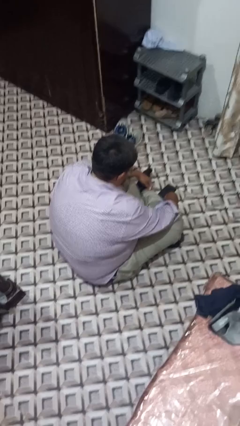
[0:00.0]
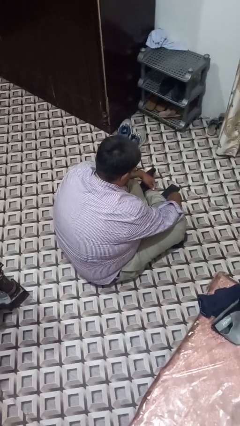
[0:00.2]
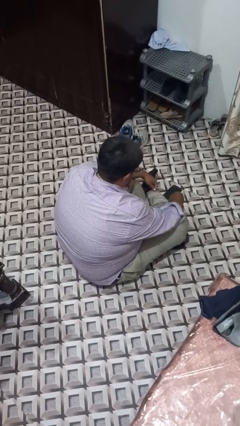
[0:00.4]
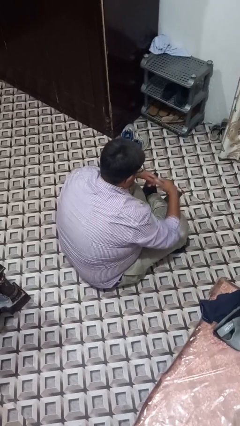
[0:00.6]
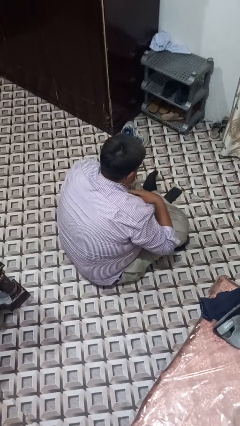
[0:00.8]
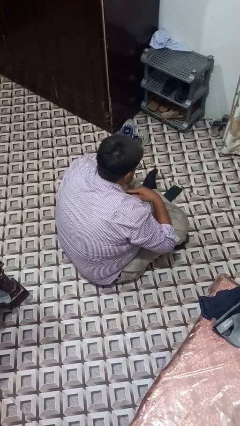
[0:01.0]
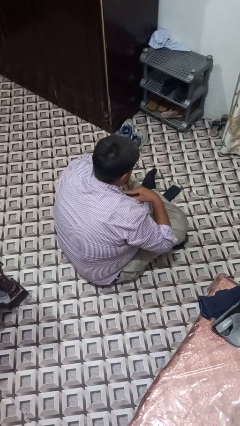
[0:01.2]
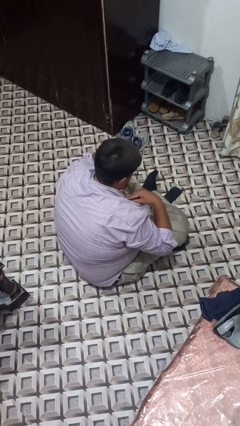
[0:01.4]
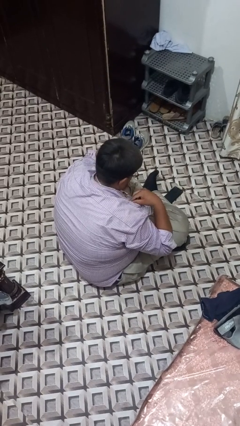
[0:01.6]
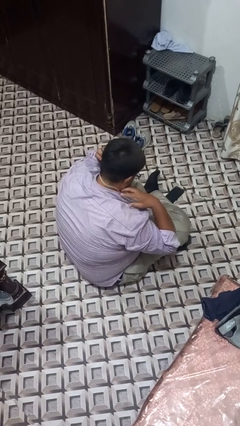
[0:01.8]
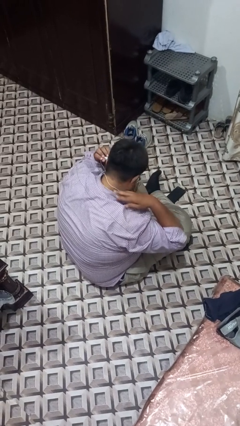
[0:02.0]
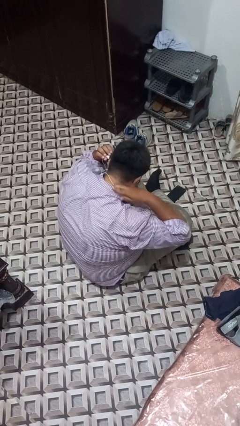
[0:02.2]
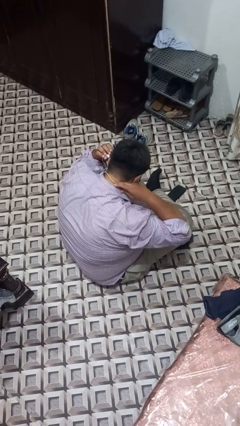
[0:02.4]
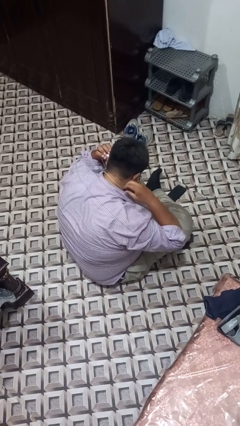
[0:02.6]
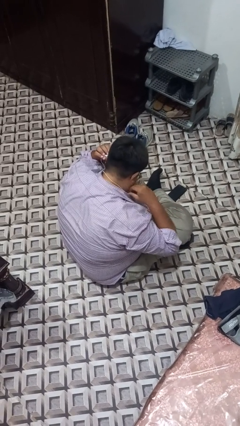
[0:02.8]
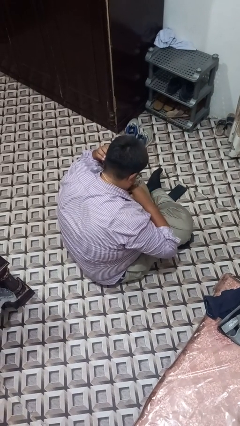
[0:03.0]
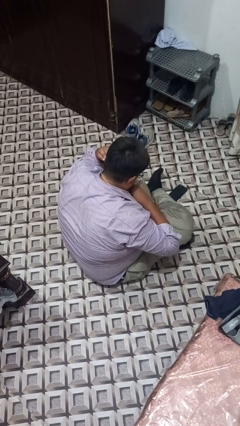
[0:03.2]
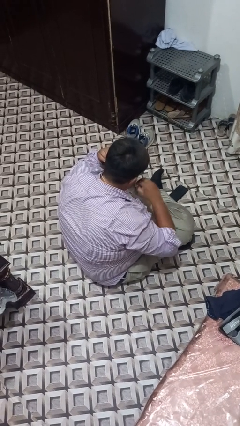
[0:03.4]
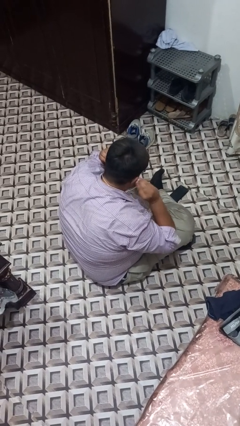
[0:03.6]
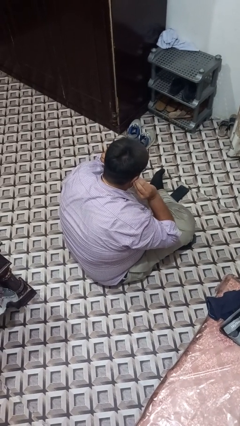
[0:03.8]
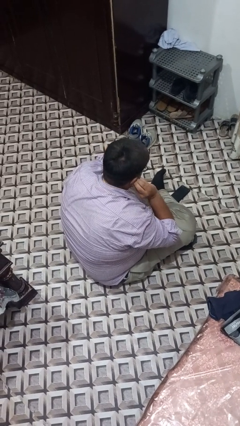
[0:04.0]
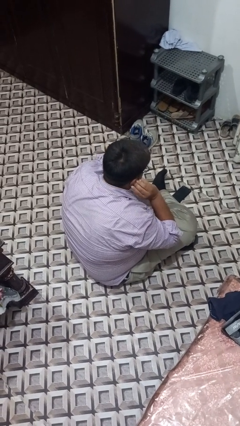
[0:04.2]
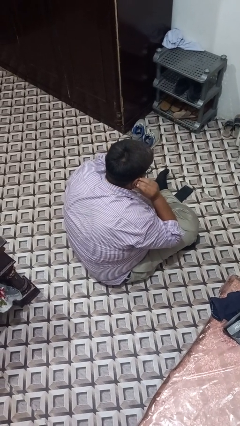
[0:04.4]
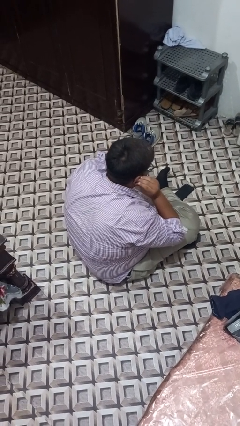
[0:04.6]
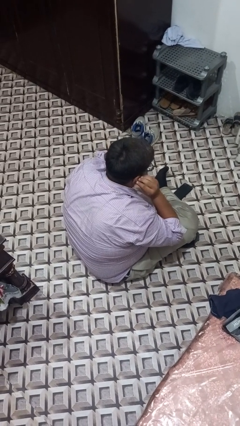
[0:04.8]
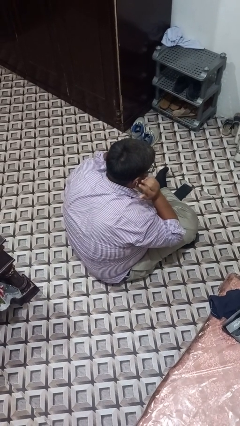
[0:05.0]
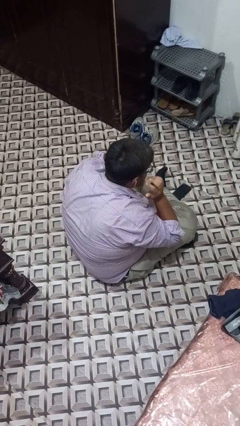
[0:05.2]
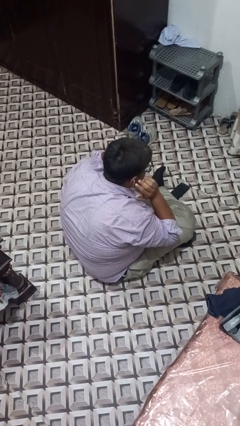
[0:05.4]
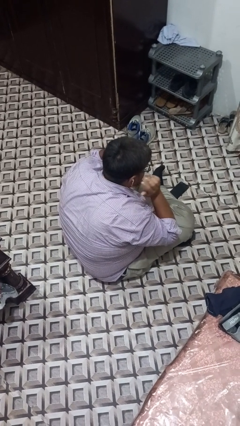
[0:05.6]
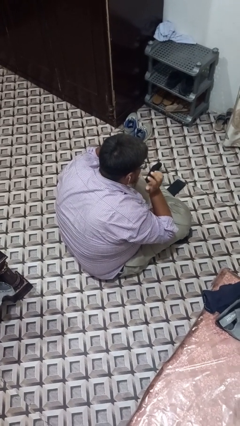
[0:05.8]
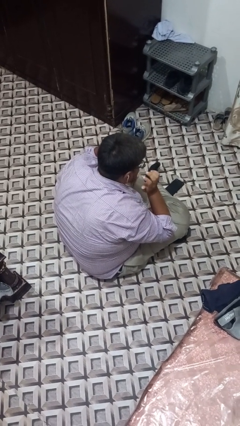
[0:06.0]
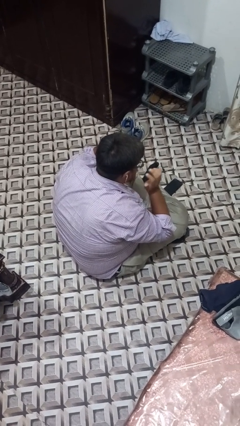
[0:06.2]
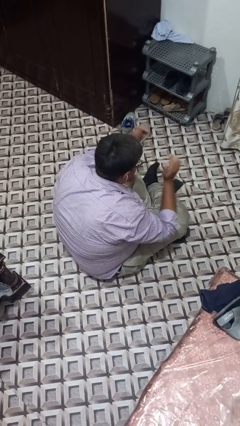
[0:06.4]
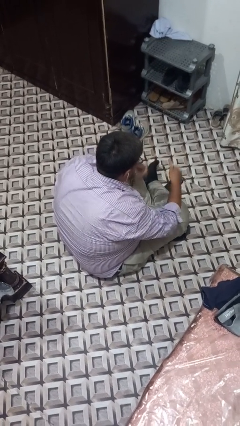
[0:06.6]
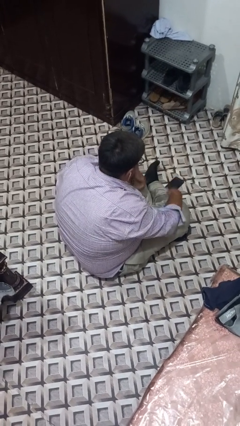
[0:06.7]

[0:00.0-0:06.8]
person puts on headphones

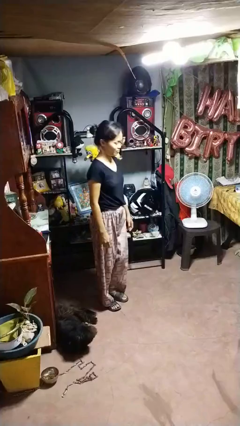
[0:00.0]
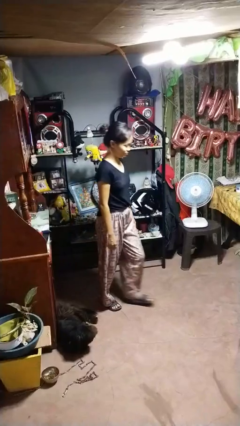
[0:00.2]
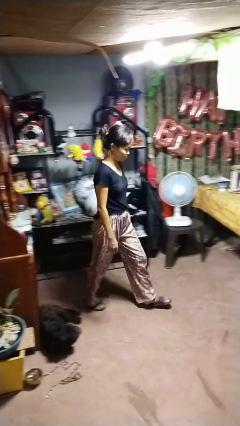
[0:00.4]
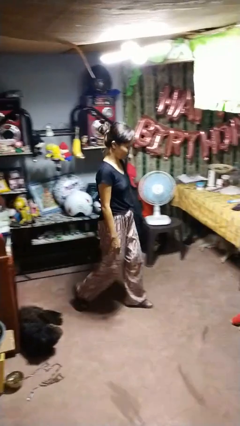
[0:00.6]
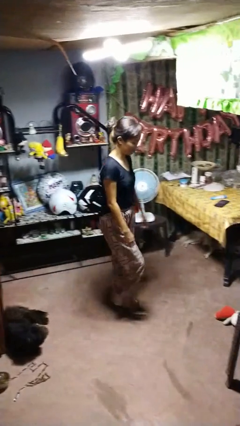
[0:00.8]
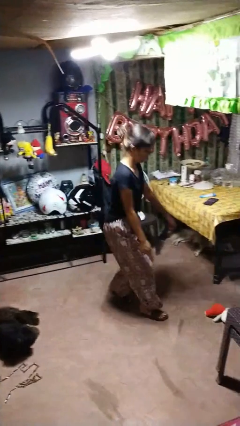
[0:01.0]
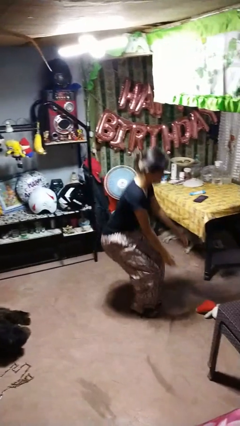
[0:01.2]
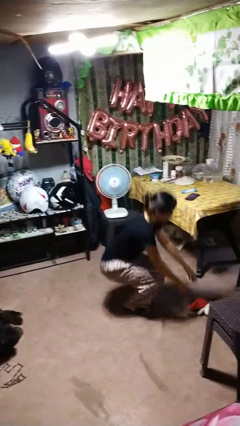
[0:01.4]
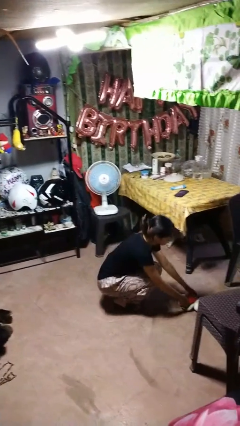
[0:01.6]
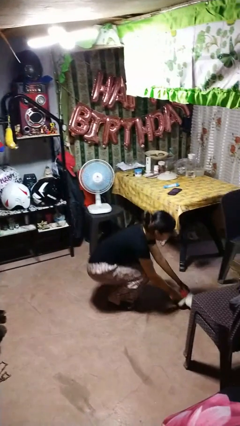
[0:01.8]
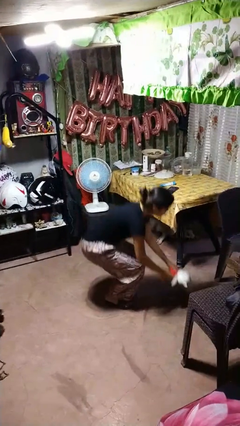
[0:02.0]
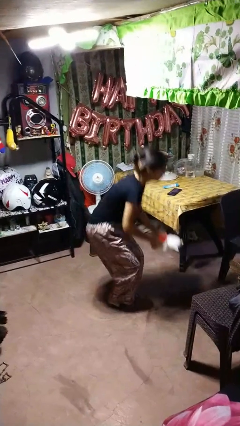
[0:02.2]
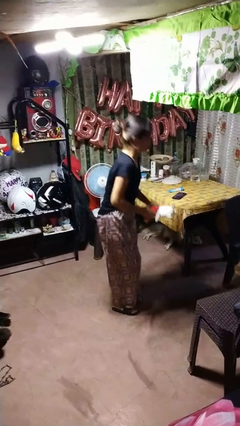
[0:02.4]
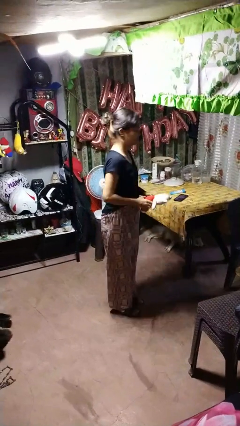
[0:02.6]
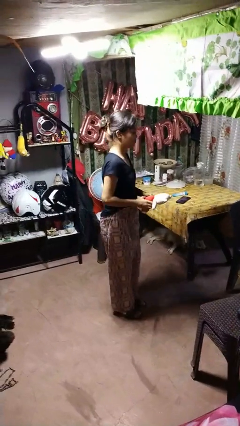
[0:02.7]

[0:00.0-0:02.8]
person picks up object from floor

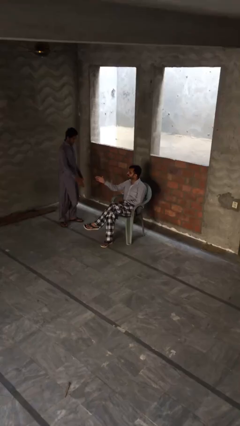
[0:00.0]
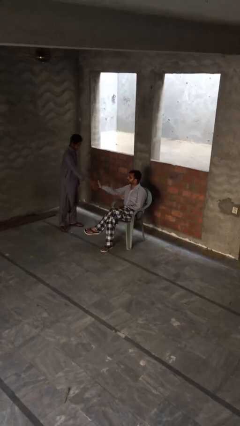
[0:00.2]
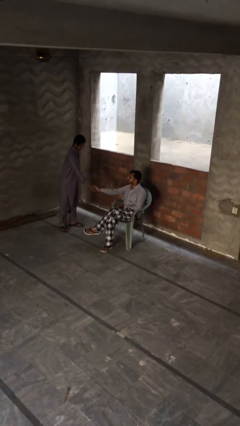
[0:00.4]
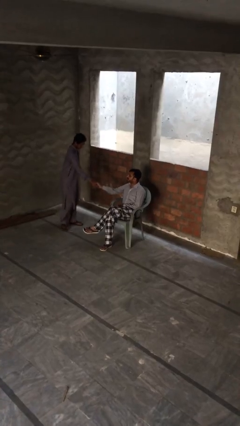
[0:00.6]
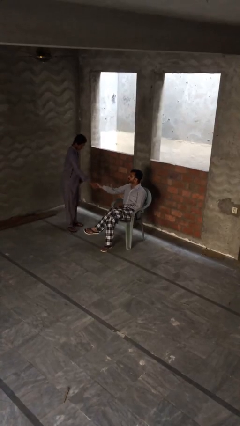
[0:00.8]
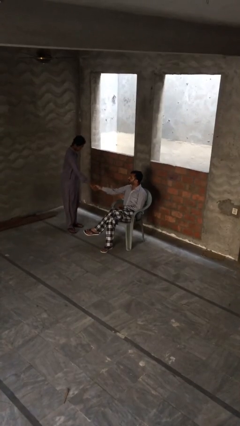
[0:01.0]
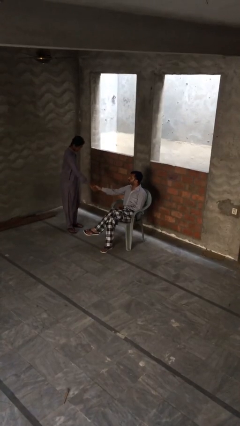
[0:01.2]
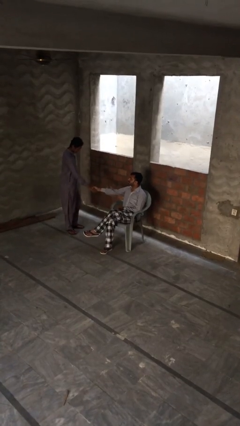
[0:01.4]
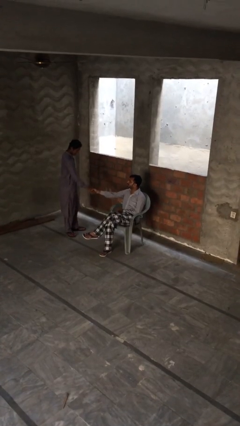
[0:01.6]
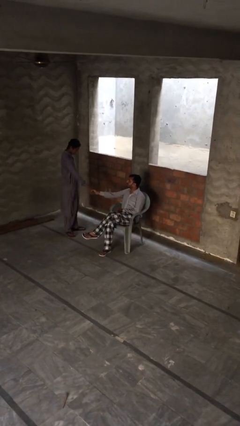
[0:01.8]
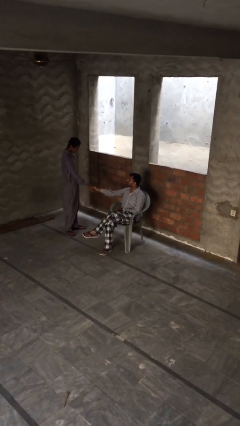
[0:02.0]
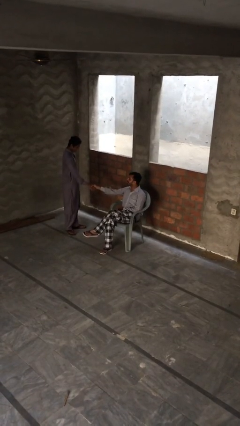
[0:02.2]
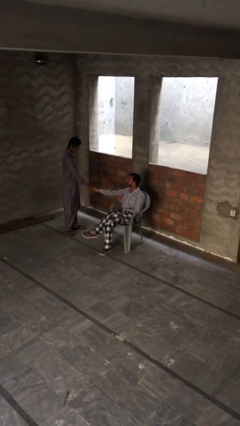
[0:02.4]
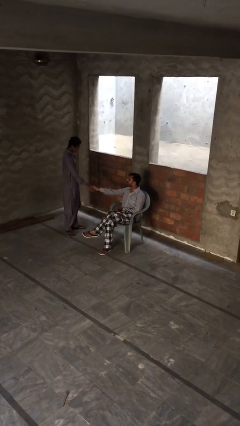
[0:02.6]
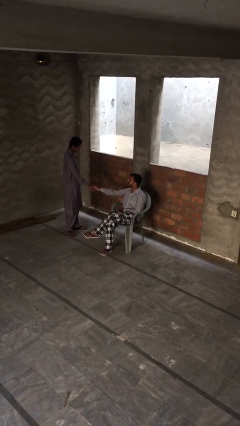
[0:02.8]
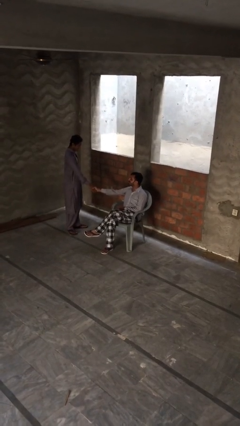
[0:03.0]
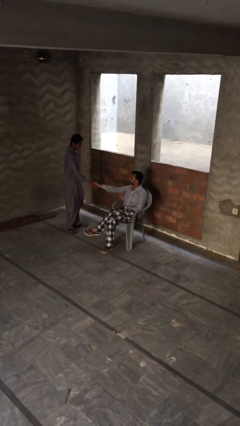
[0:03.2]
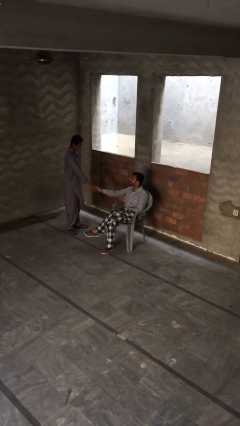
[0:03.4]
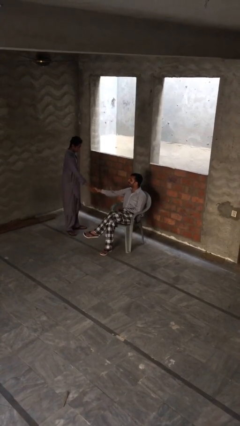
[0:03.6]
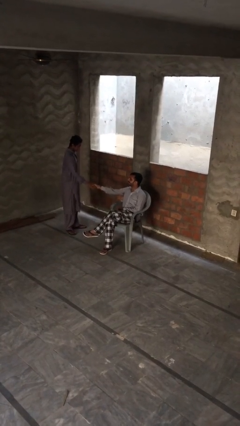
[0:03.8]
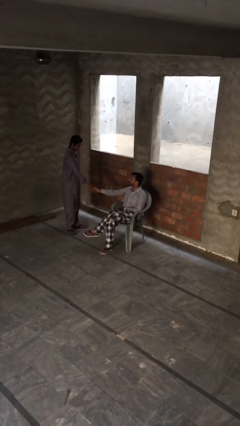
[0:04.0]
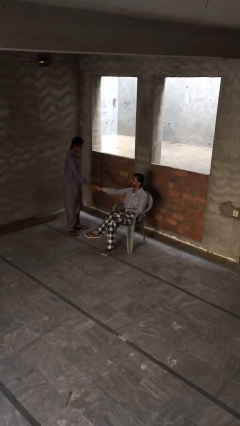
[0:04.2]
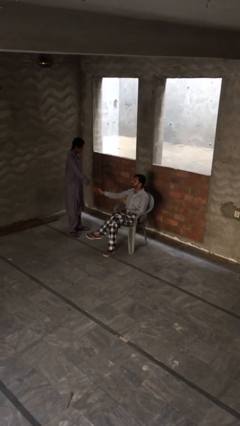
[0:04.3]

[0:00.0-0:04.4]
person shakes hand

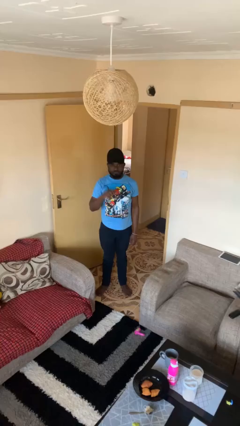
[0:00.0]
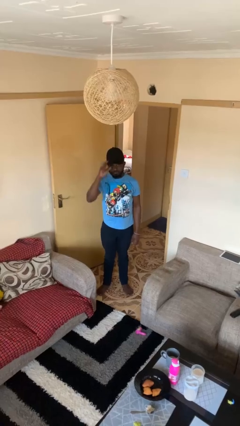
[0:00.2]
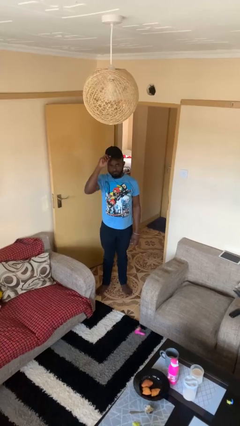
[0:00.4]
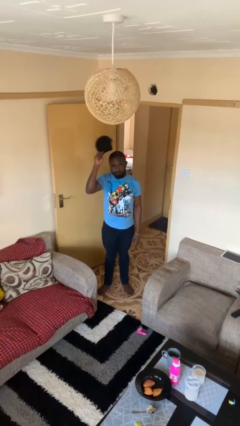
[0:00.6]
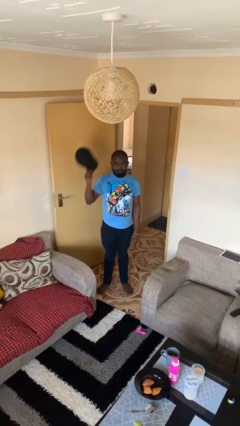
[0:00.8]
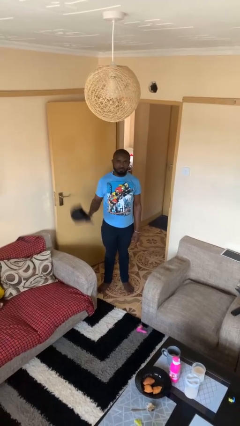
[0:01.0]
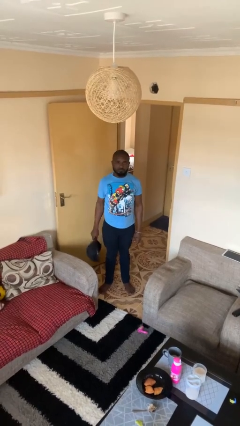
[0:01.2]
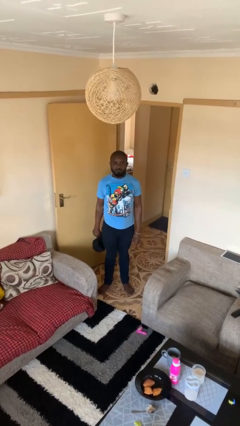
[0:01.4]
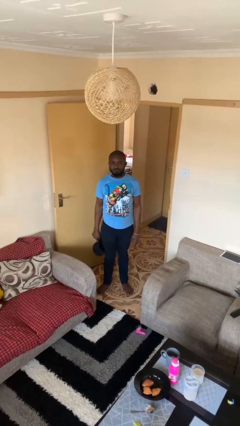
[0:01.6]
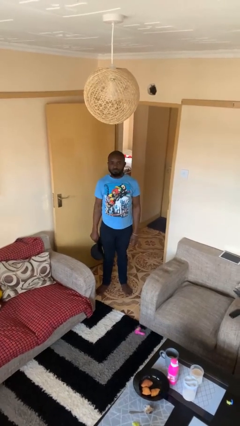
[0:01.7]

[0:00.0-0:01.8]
person takes off hat

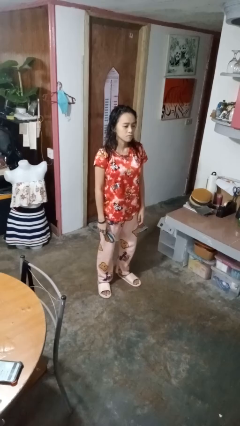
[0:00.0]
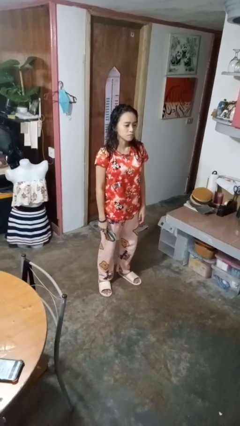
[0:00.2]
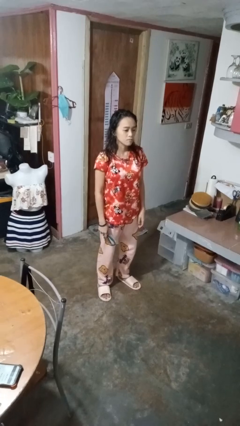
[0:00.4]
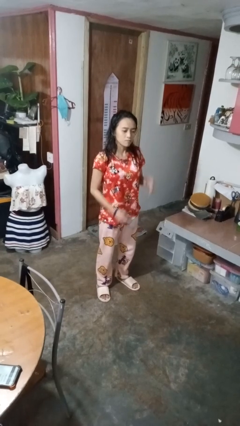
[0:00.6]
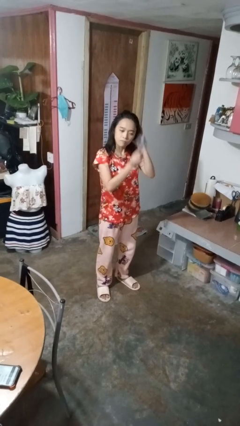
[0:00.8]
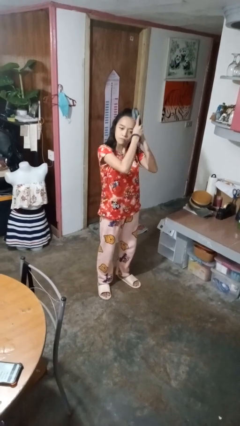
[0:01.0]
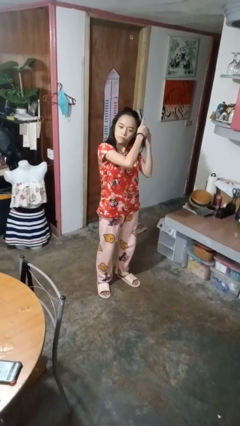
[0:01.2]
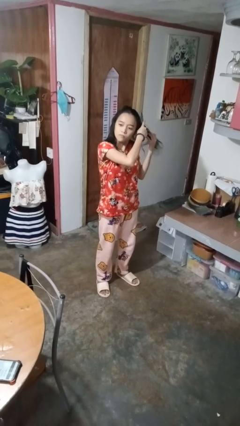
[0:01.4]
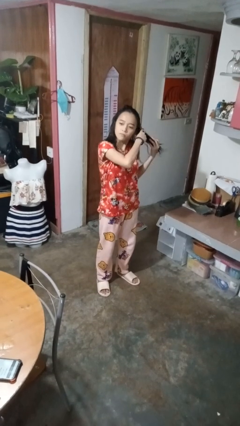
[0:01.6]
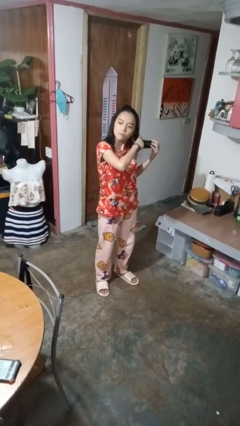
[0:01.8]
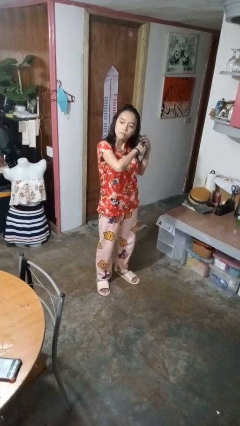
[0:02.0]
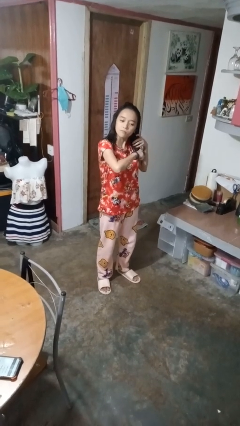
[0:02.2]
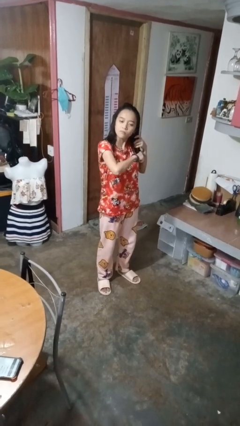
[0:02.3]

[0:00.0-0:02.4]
person brushes hair
